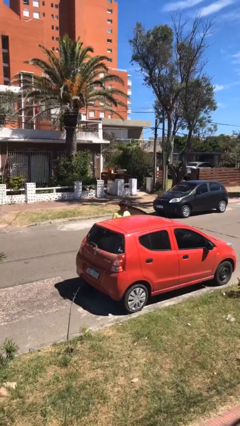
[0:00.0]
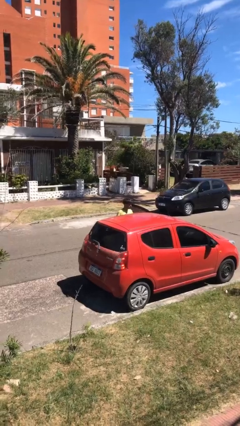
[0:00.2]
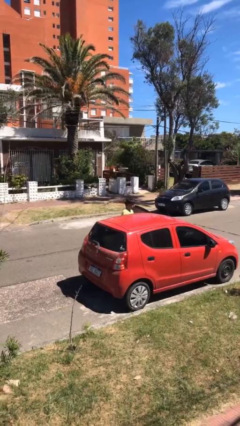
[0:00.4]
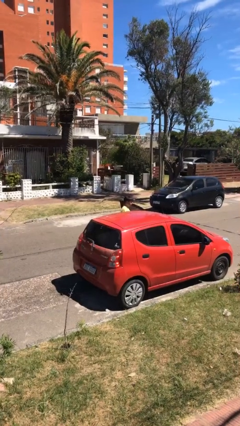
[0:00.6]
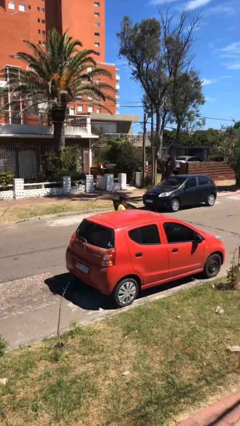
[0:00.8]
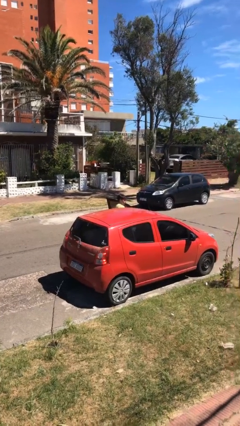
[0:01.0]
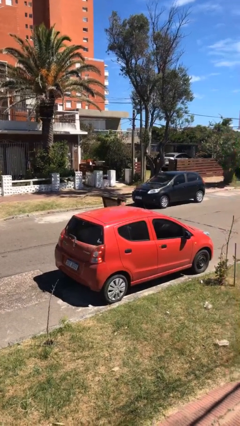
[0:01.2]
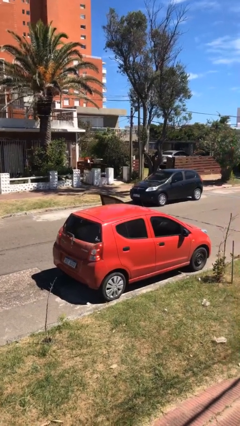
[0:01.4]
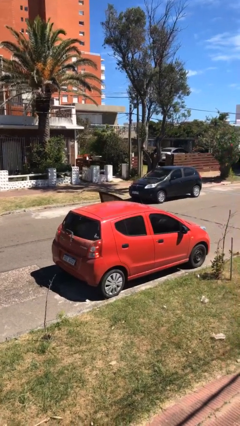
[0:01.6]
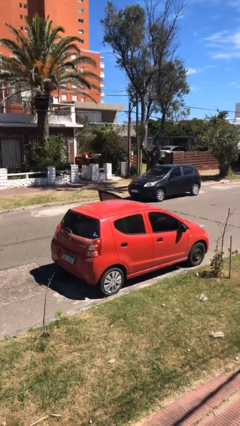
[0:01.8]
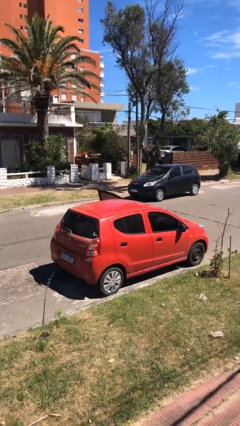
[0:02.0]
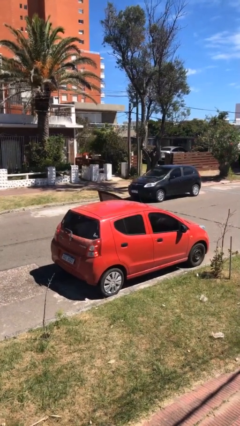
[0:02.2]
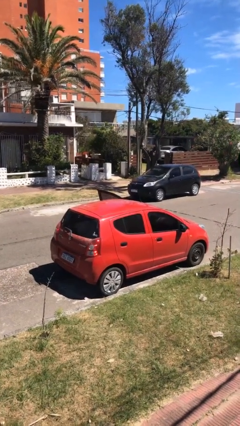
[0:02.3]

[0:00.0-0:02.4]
person enters car

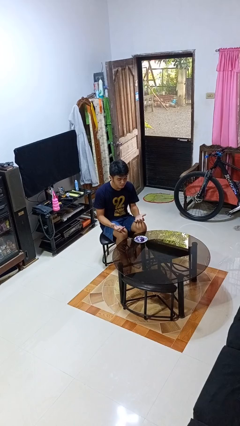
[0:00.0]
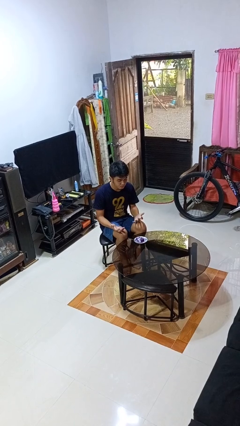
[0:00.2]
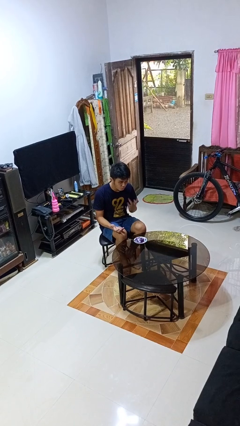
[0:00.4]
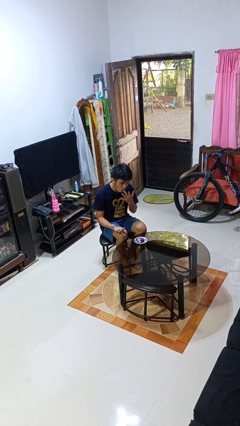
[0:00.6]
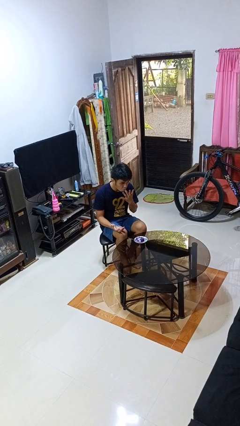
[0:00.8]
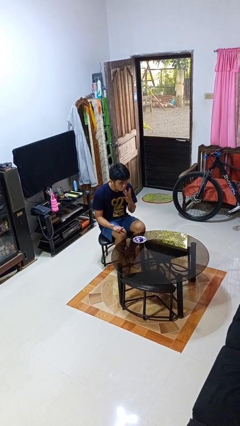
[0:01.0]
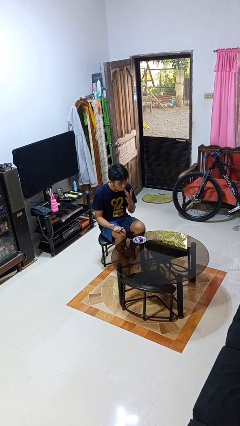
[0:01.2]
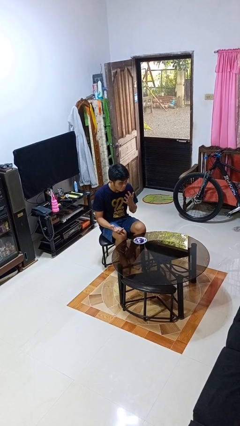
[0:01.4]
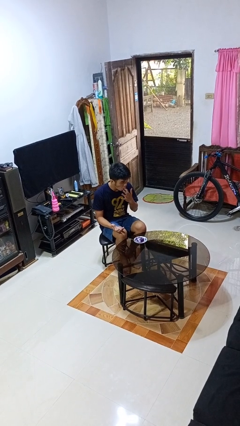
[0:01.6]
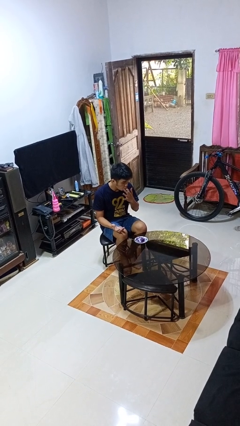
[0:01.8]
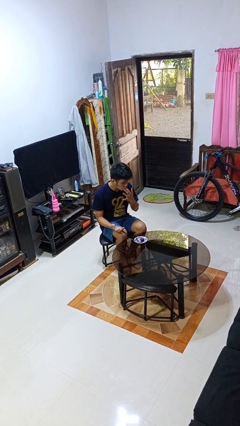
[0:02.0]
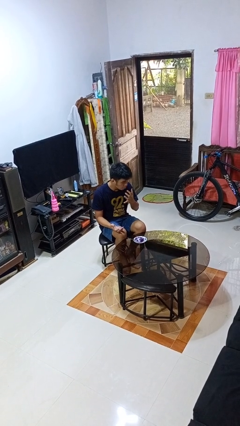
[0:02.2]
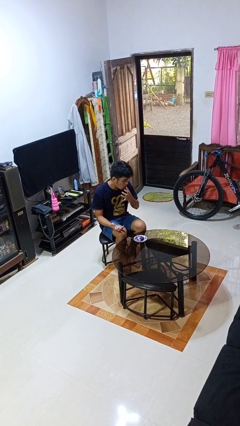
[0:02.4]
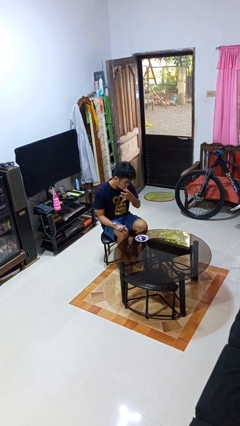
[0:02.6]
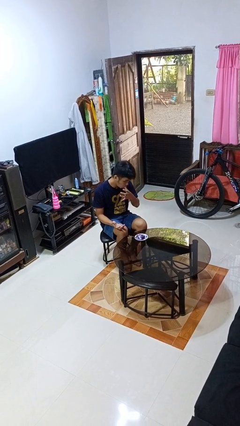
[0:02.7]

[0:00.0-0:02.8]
person licks fingers

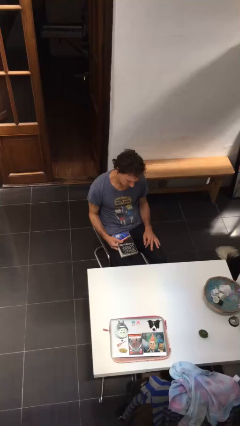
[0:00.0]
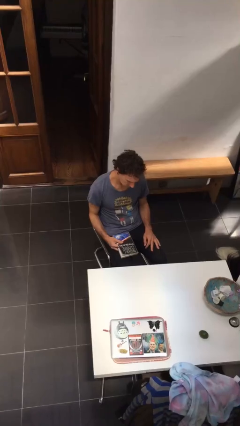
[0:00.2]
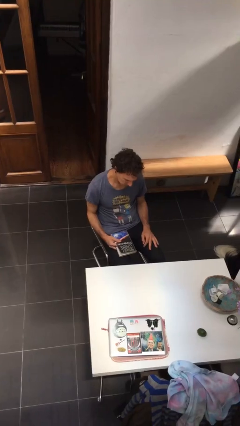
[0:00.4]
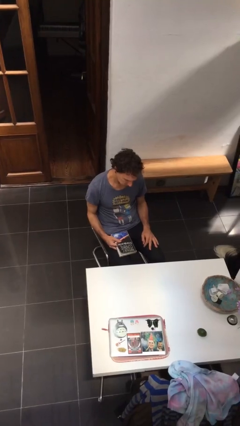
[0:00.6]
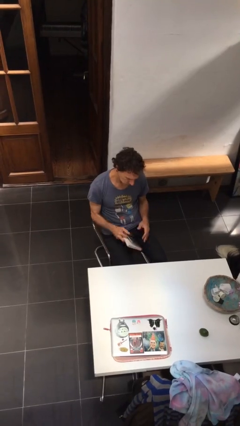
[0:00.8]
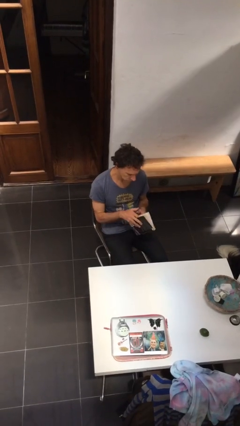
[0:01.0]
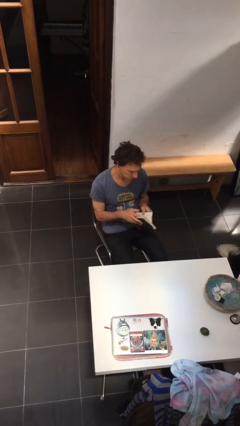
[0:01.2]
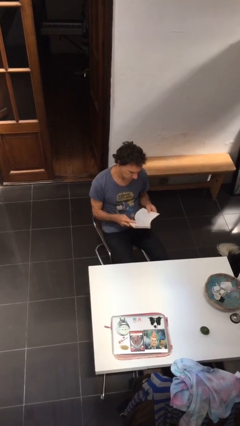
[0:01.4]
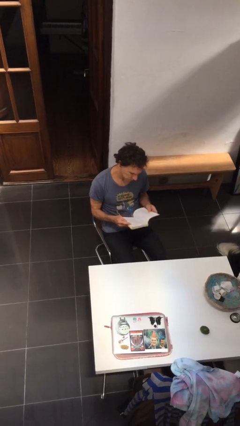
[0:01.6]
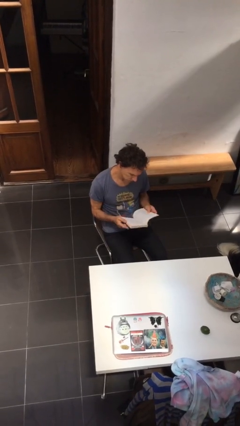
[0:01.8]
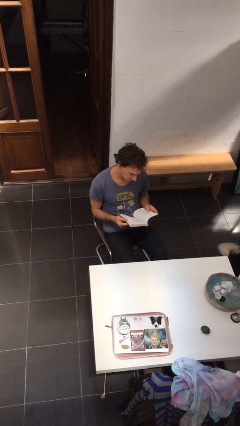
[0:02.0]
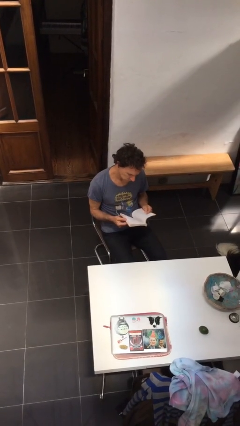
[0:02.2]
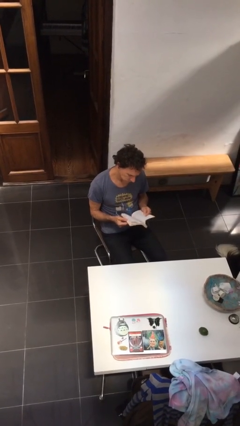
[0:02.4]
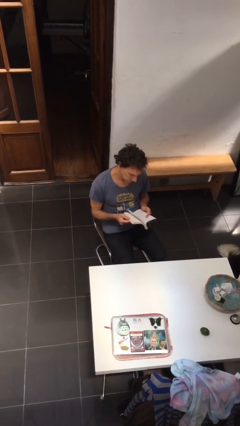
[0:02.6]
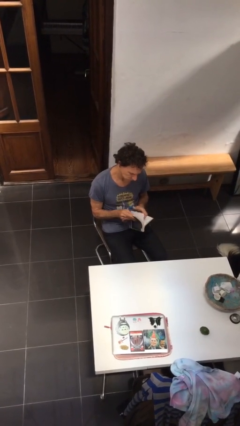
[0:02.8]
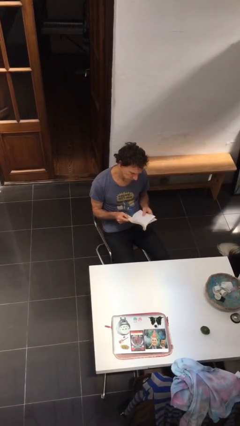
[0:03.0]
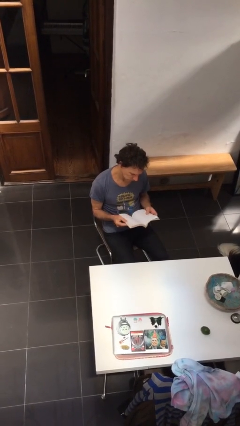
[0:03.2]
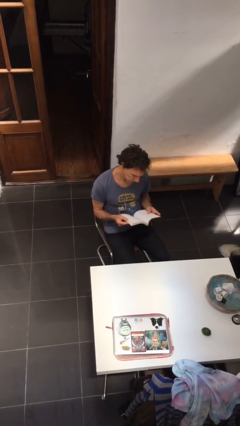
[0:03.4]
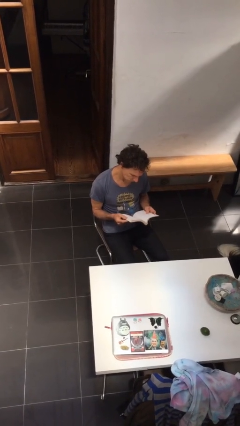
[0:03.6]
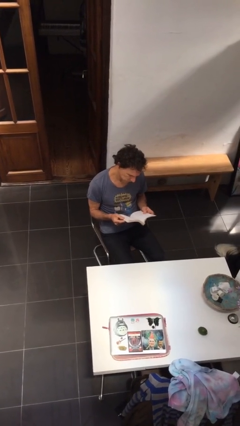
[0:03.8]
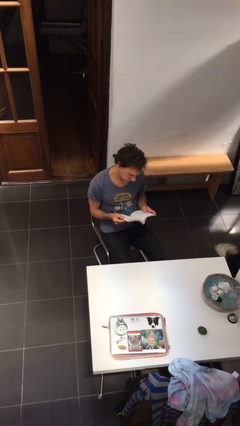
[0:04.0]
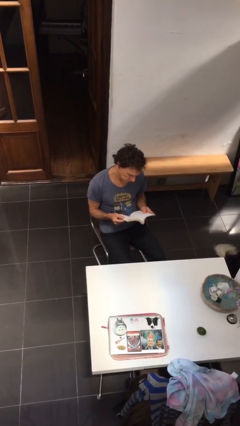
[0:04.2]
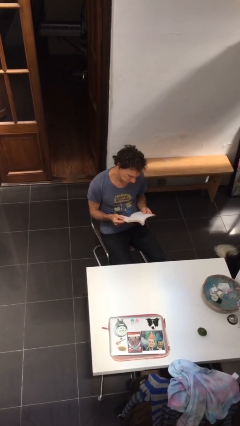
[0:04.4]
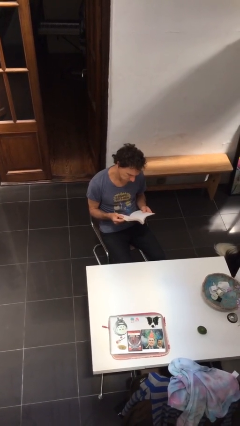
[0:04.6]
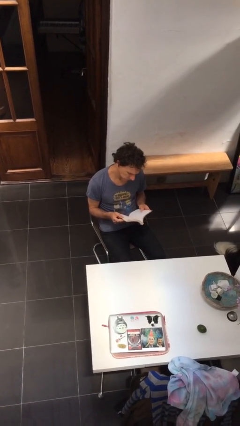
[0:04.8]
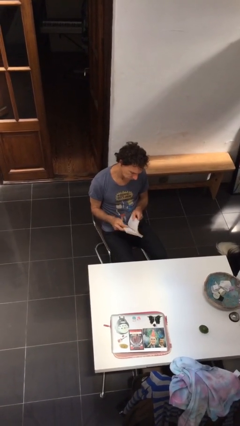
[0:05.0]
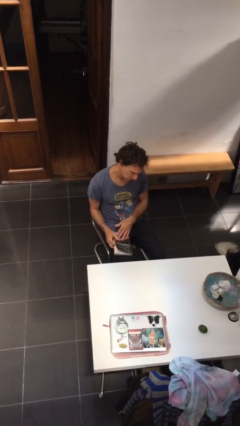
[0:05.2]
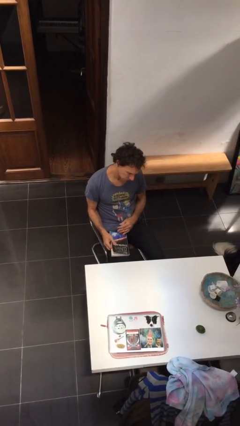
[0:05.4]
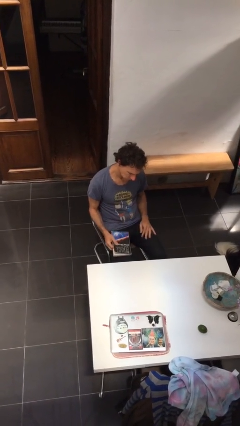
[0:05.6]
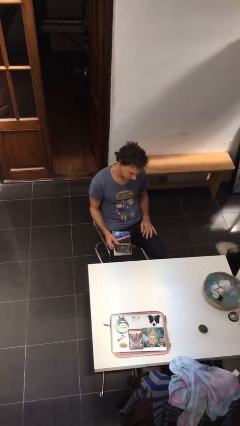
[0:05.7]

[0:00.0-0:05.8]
person reads document

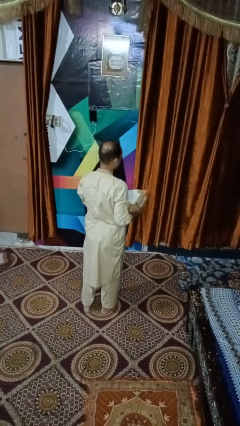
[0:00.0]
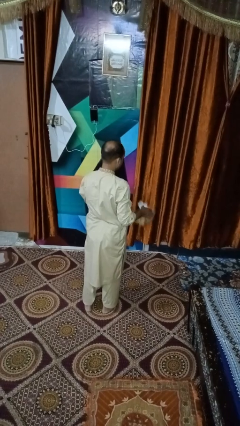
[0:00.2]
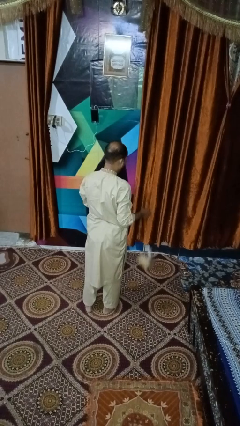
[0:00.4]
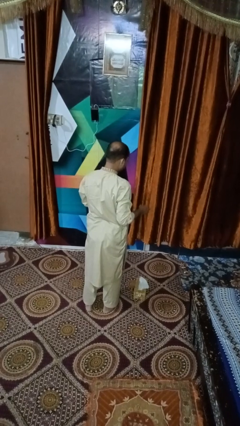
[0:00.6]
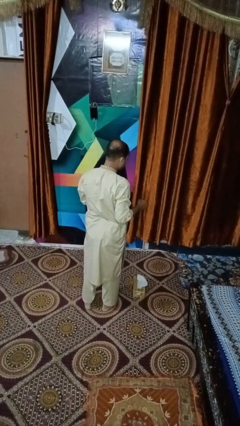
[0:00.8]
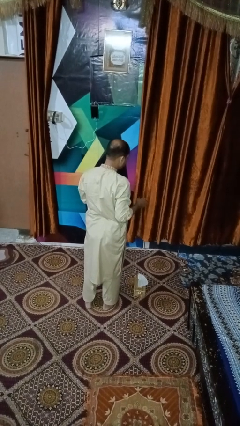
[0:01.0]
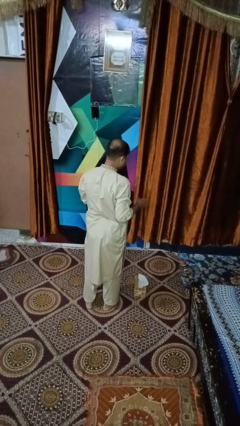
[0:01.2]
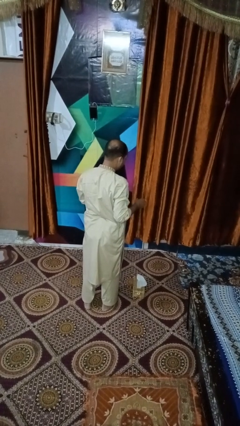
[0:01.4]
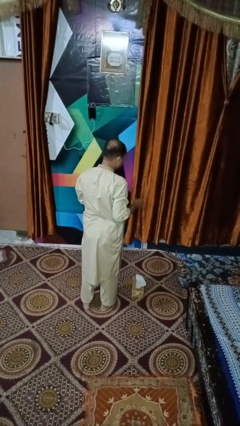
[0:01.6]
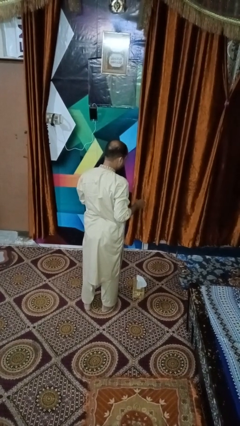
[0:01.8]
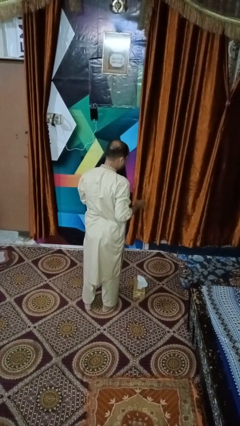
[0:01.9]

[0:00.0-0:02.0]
person drops object

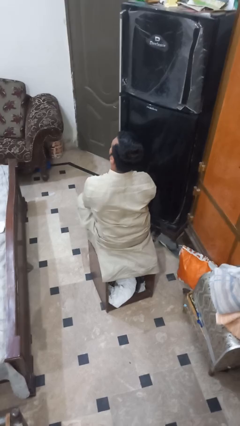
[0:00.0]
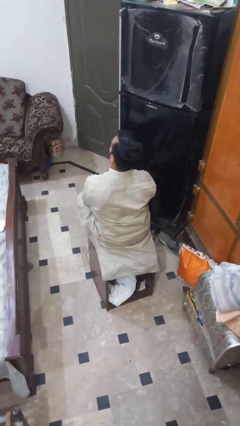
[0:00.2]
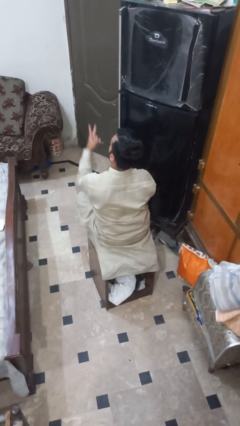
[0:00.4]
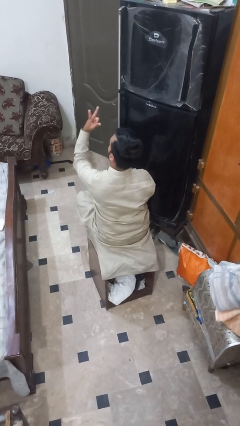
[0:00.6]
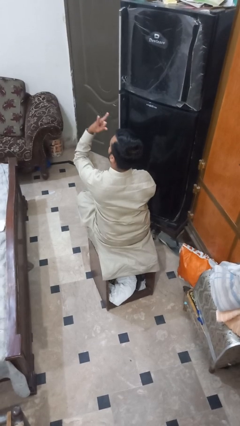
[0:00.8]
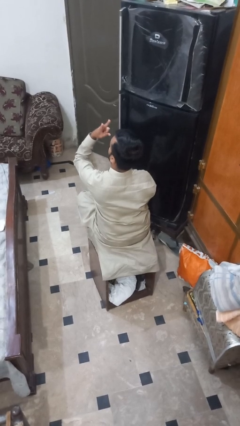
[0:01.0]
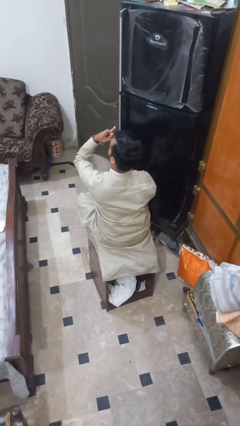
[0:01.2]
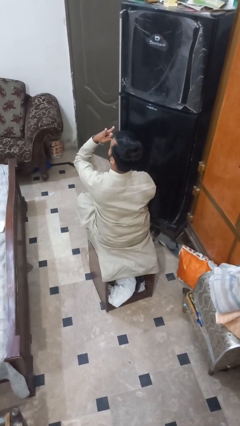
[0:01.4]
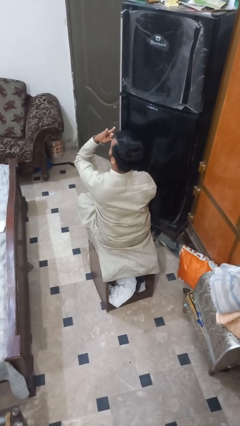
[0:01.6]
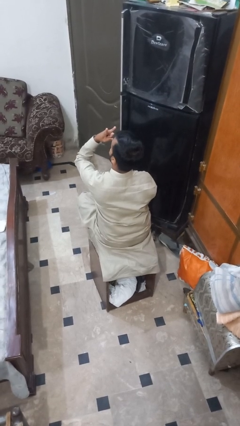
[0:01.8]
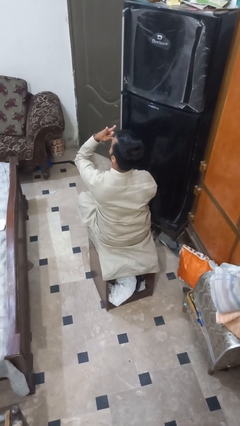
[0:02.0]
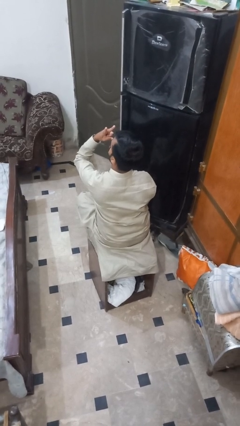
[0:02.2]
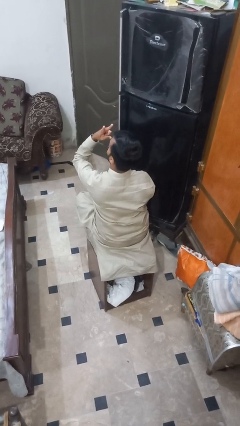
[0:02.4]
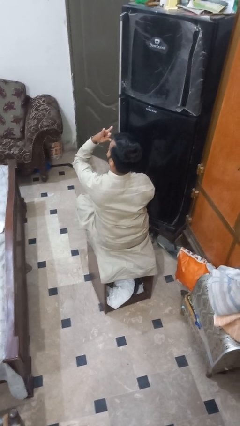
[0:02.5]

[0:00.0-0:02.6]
person gestures watch closely

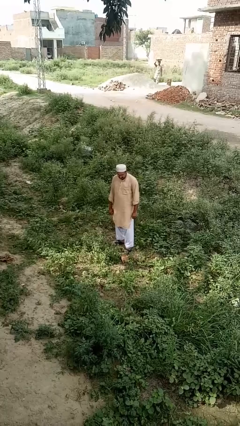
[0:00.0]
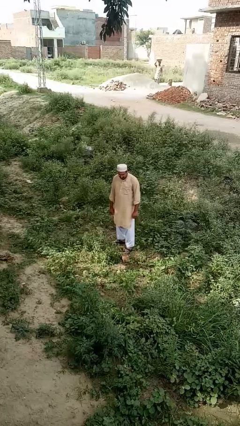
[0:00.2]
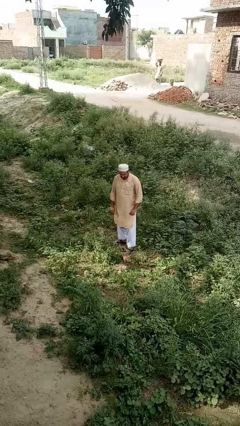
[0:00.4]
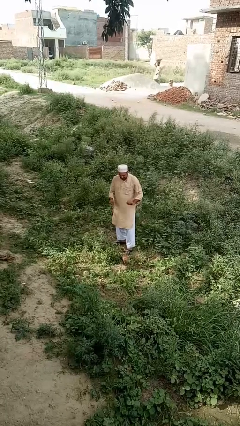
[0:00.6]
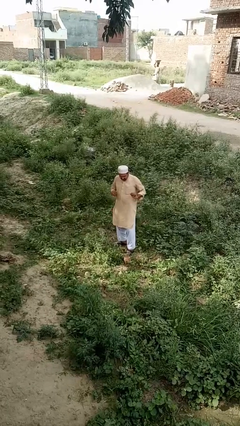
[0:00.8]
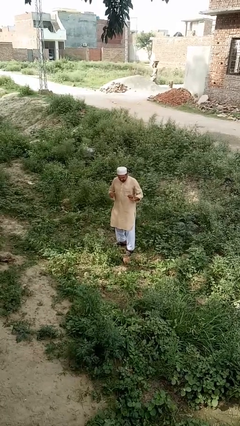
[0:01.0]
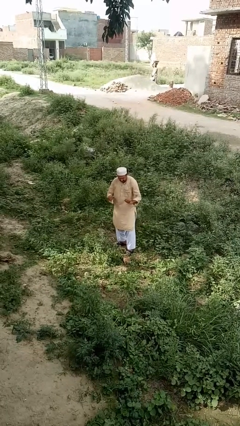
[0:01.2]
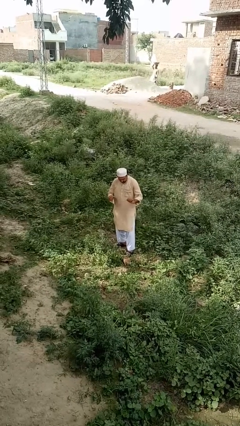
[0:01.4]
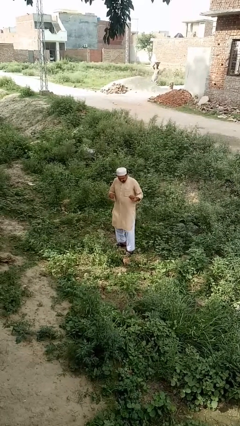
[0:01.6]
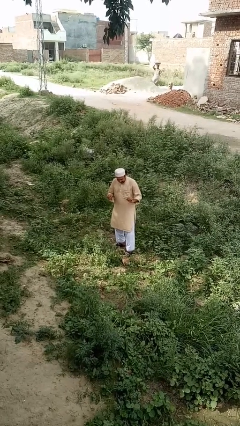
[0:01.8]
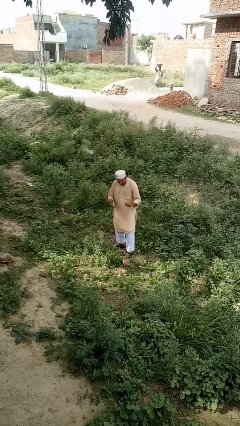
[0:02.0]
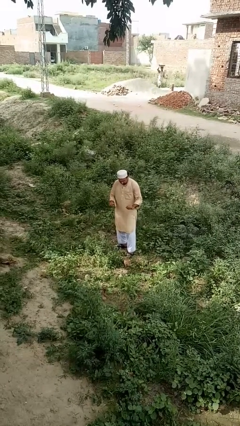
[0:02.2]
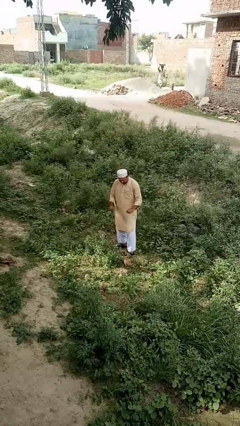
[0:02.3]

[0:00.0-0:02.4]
person dances in place
